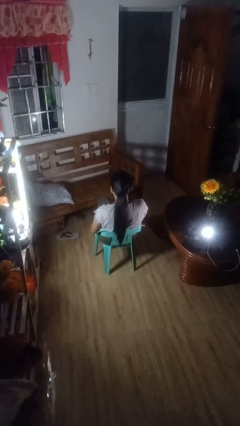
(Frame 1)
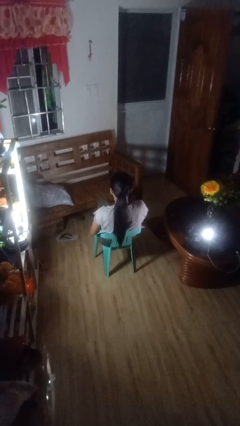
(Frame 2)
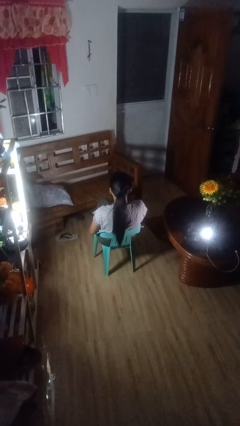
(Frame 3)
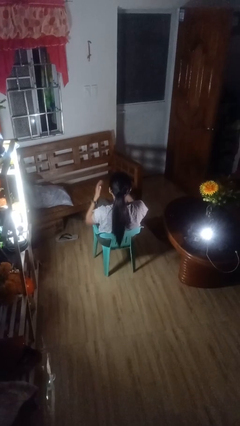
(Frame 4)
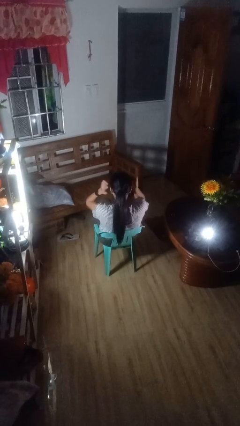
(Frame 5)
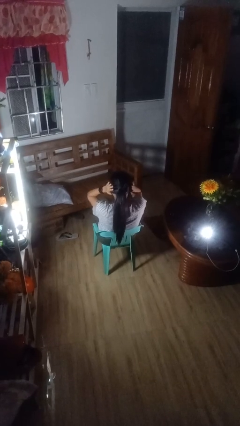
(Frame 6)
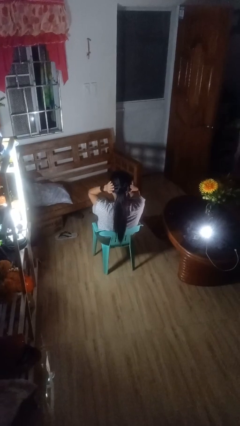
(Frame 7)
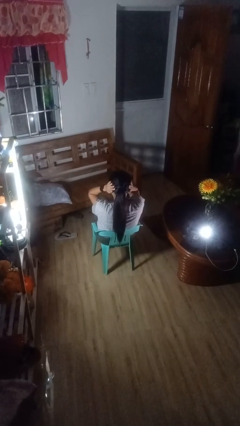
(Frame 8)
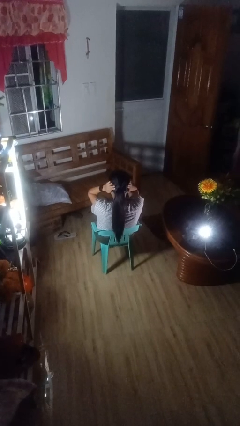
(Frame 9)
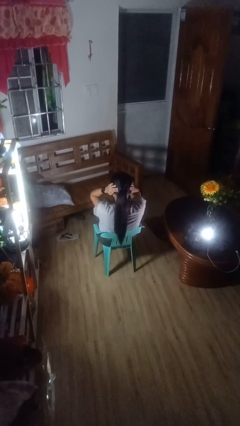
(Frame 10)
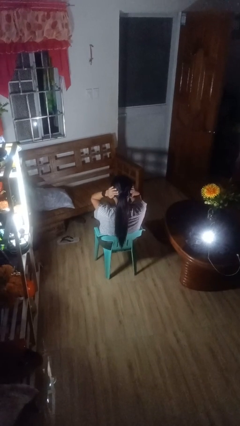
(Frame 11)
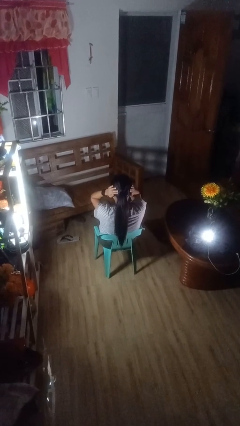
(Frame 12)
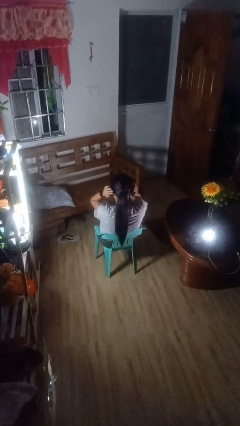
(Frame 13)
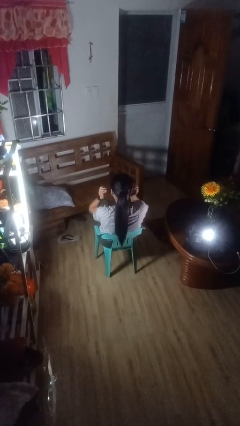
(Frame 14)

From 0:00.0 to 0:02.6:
person puts fingers in ear

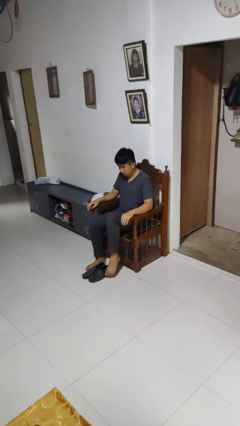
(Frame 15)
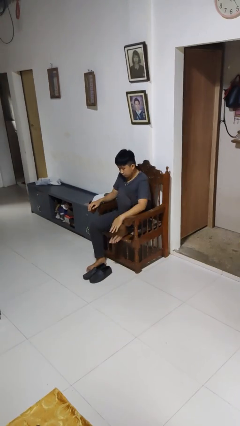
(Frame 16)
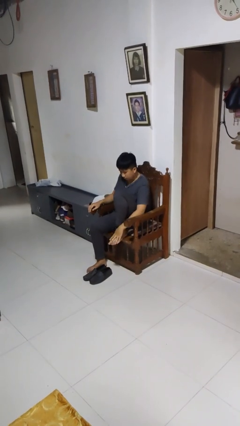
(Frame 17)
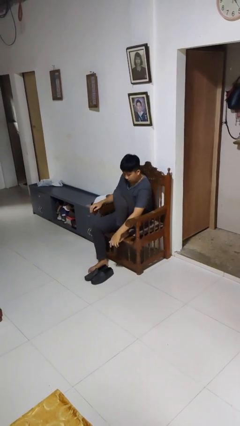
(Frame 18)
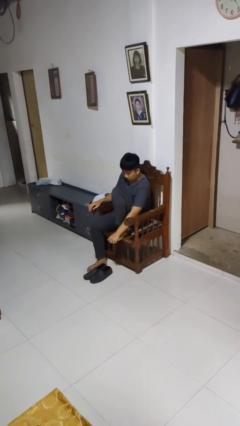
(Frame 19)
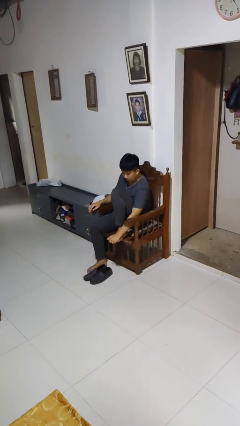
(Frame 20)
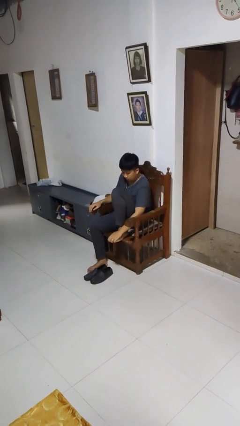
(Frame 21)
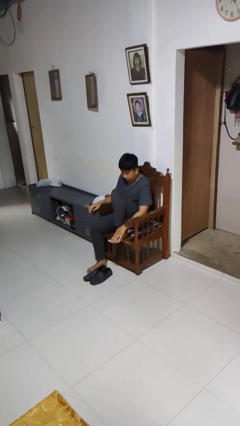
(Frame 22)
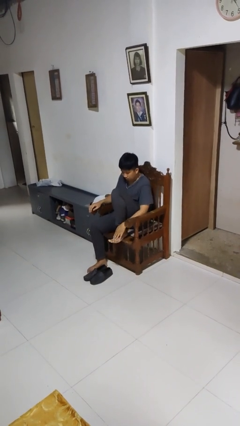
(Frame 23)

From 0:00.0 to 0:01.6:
person rubs foot

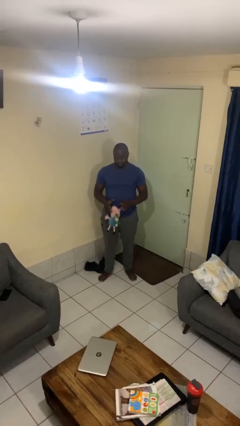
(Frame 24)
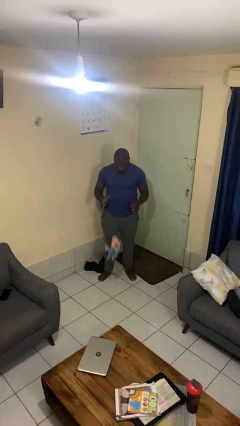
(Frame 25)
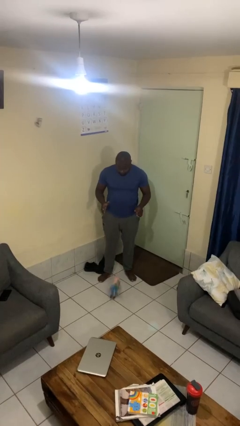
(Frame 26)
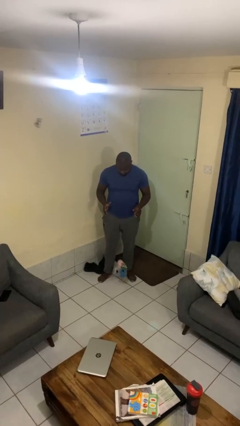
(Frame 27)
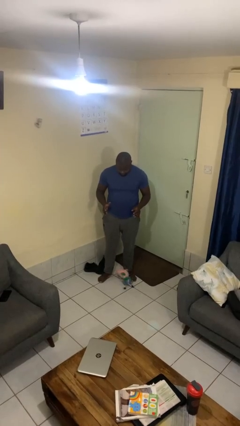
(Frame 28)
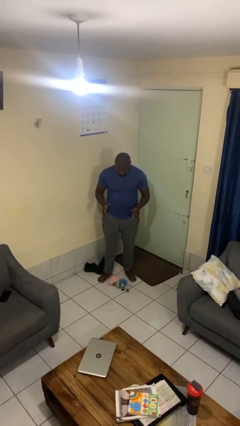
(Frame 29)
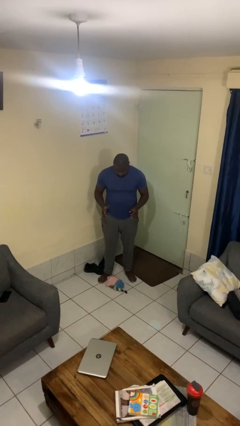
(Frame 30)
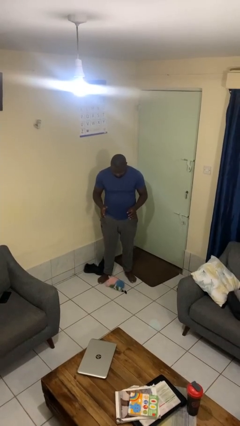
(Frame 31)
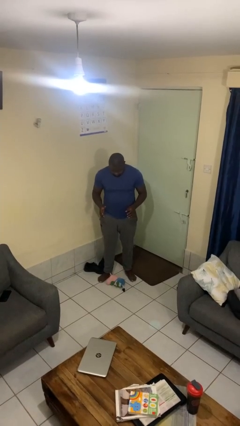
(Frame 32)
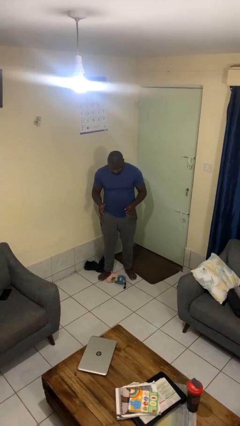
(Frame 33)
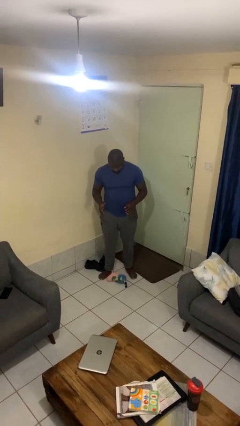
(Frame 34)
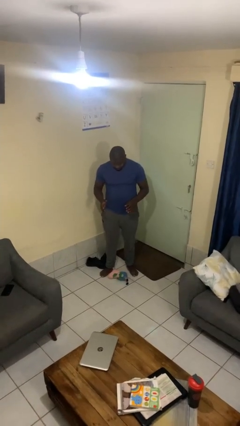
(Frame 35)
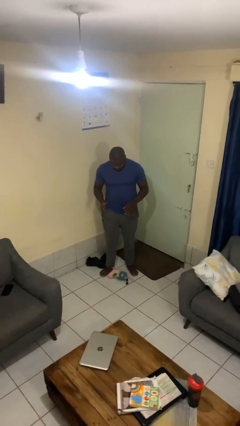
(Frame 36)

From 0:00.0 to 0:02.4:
person drops object

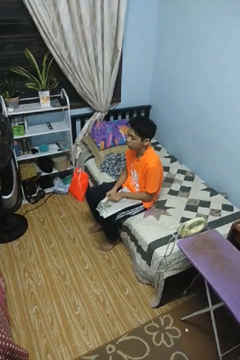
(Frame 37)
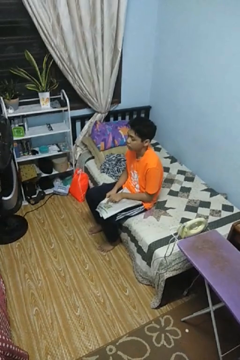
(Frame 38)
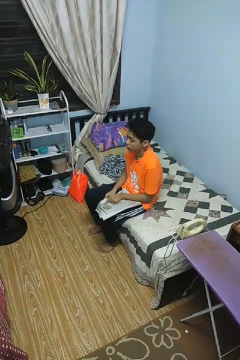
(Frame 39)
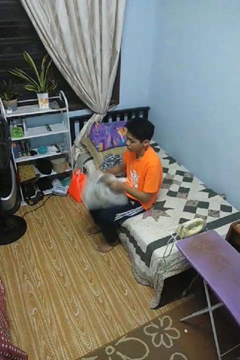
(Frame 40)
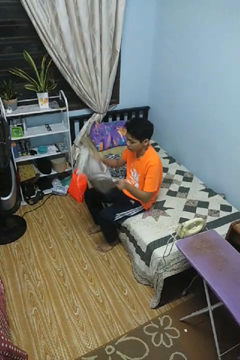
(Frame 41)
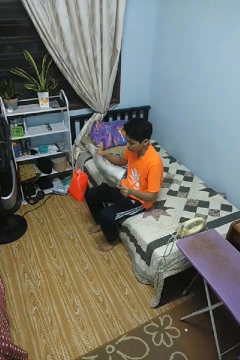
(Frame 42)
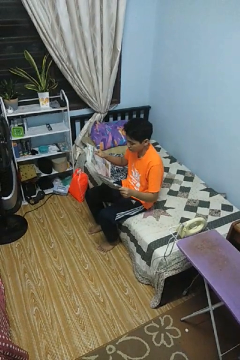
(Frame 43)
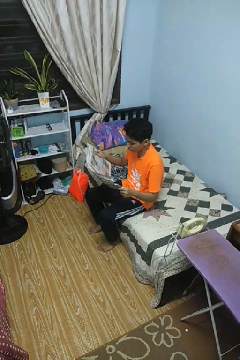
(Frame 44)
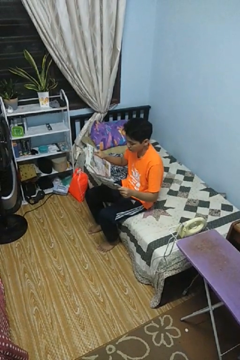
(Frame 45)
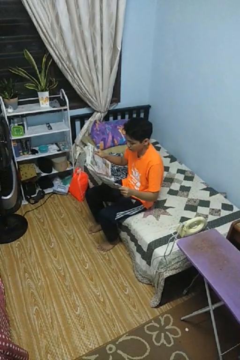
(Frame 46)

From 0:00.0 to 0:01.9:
person reads newspaper

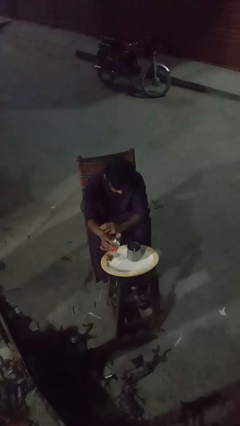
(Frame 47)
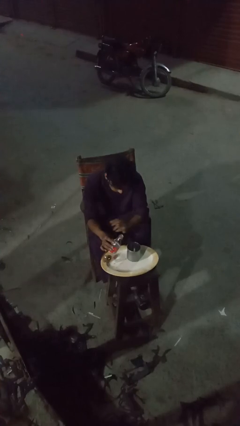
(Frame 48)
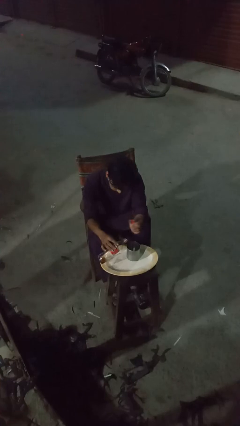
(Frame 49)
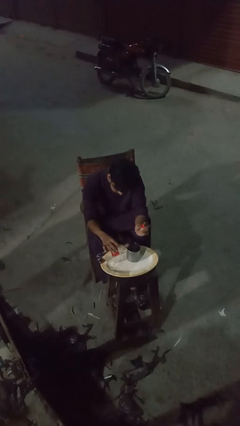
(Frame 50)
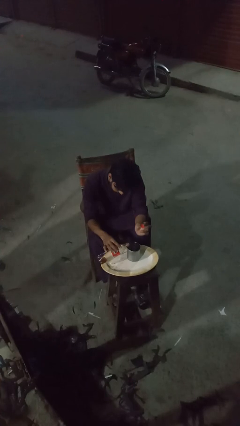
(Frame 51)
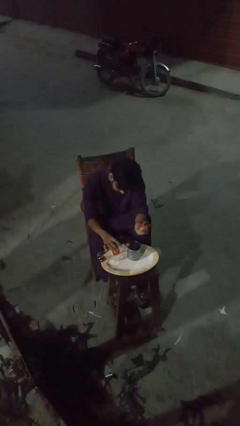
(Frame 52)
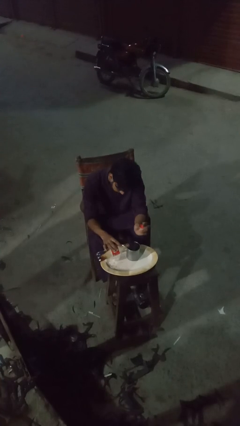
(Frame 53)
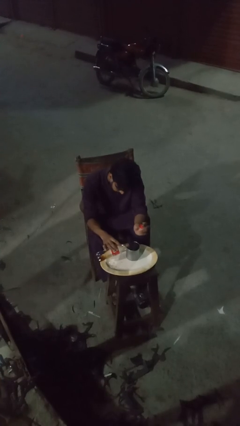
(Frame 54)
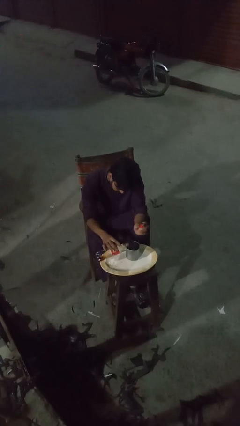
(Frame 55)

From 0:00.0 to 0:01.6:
person pours liquid into cup

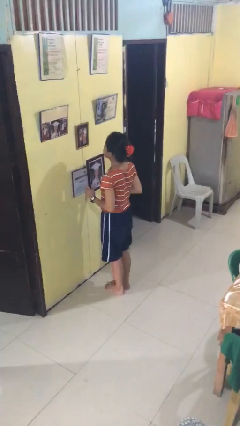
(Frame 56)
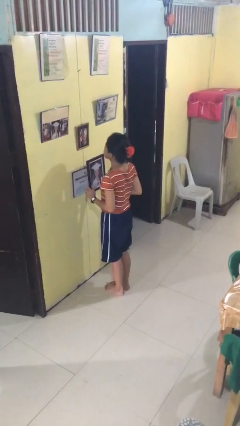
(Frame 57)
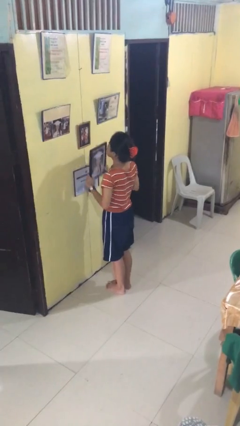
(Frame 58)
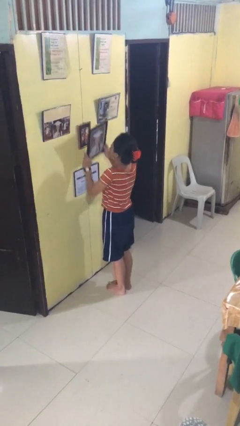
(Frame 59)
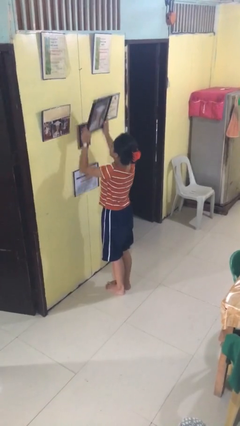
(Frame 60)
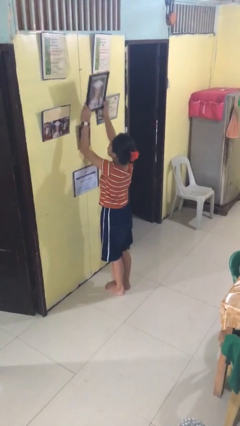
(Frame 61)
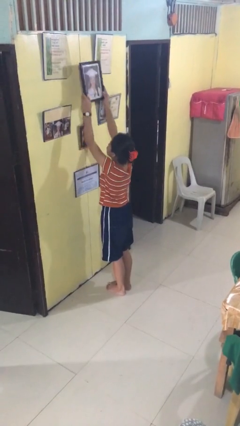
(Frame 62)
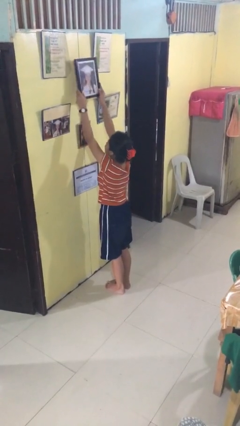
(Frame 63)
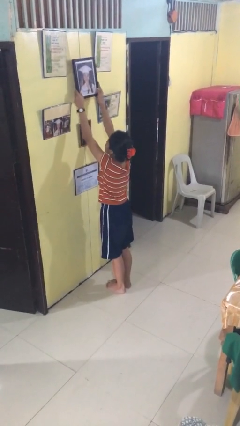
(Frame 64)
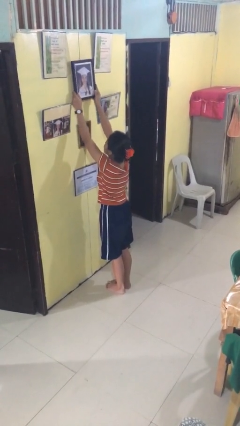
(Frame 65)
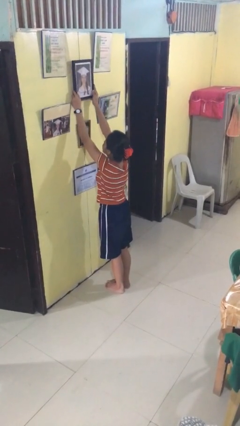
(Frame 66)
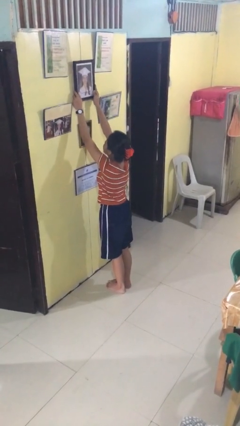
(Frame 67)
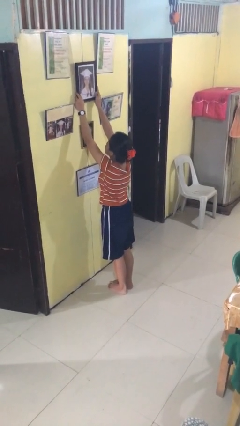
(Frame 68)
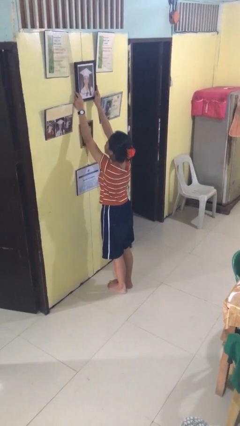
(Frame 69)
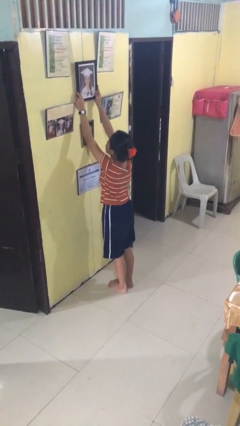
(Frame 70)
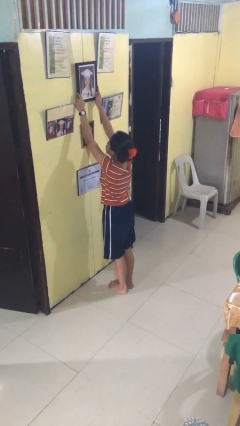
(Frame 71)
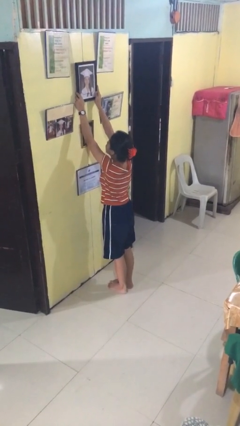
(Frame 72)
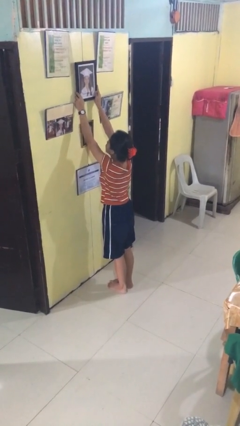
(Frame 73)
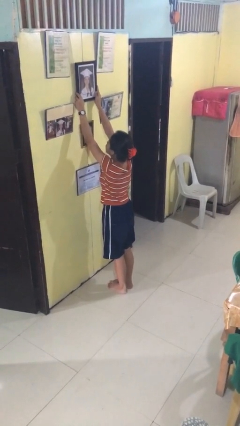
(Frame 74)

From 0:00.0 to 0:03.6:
person puts up picture frame

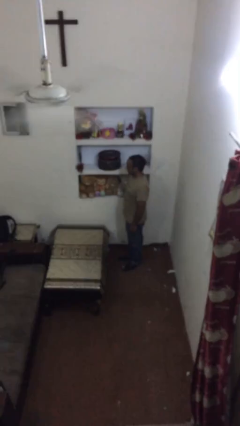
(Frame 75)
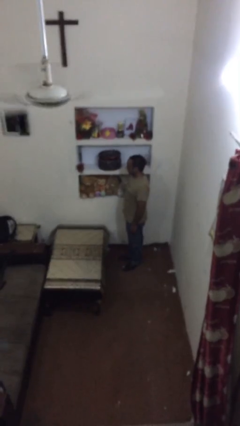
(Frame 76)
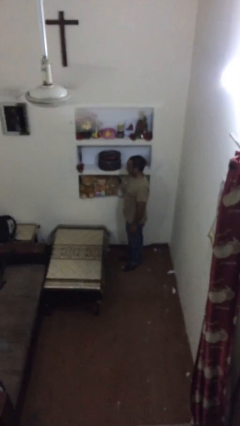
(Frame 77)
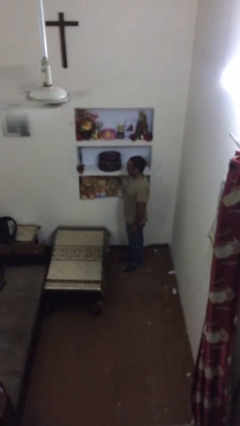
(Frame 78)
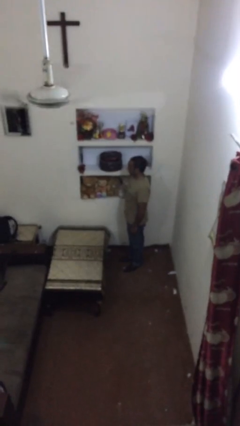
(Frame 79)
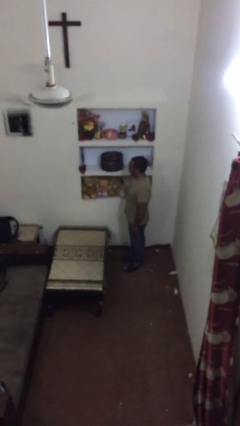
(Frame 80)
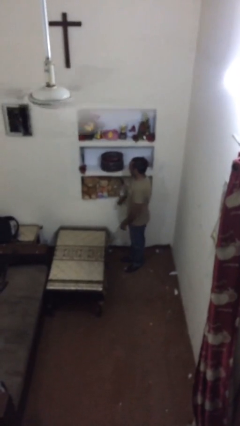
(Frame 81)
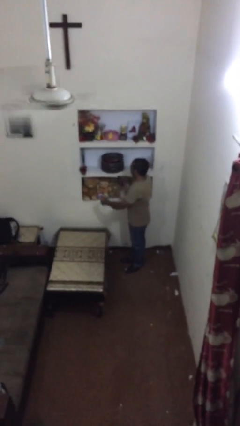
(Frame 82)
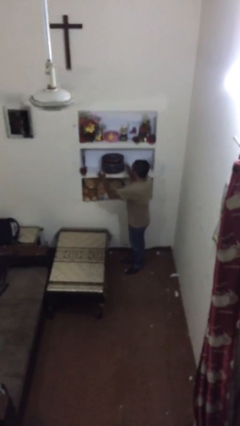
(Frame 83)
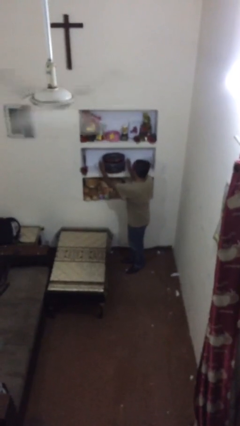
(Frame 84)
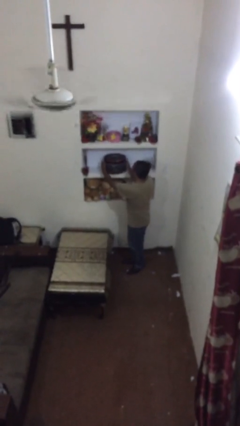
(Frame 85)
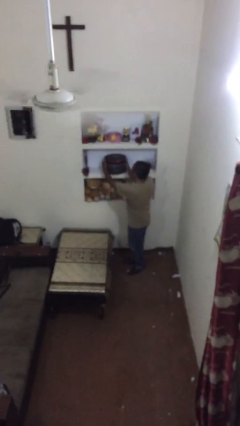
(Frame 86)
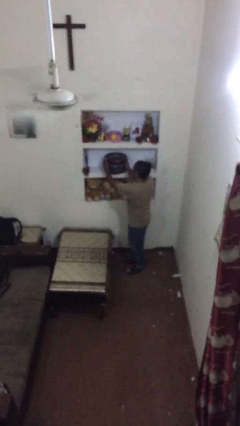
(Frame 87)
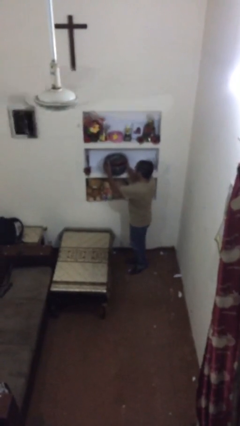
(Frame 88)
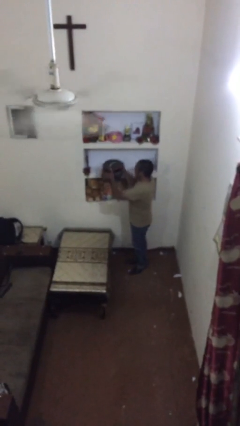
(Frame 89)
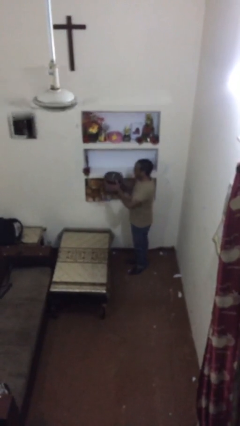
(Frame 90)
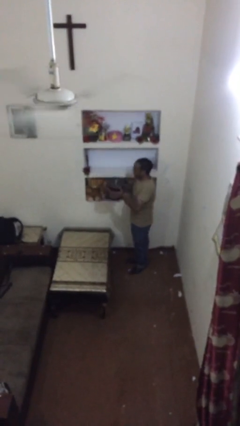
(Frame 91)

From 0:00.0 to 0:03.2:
person picks up object from shelf

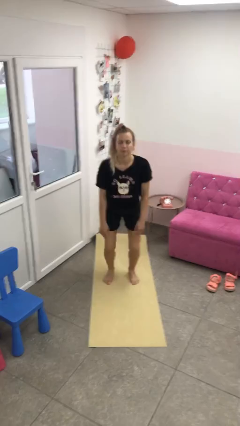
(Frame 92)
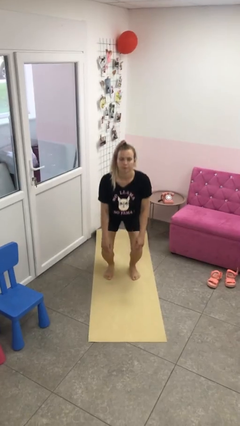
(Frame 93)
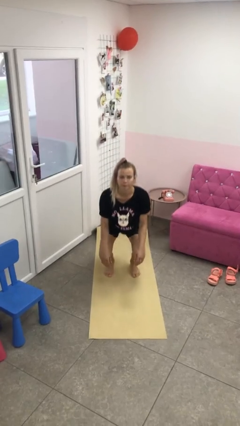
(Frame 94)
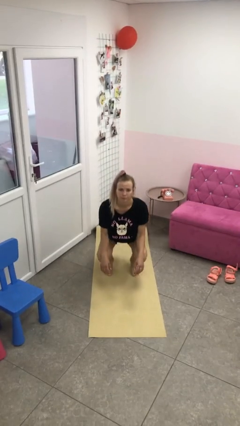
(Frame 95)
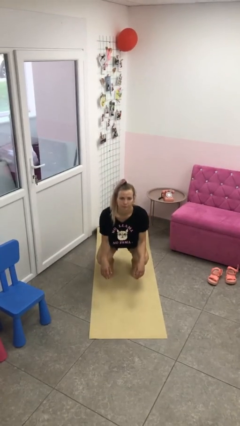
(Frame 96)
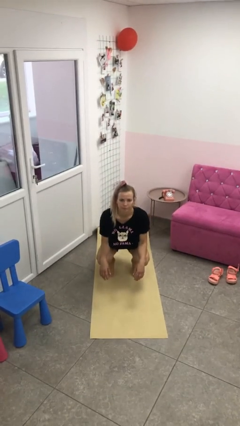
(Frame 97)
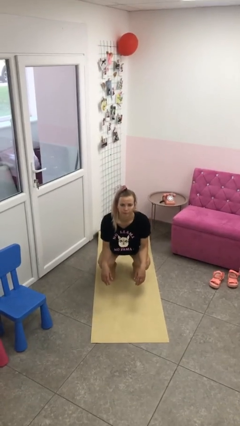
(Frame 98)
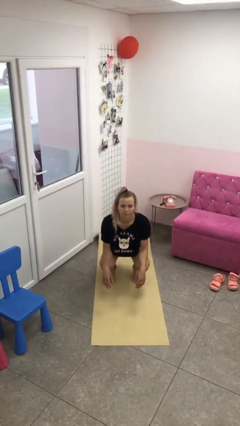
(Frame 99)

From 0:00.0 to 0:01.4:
person squats
